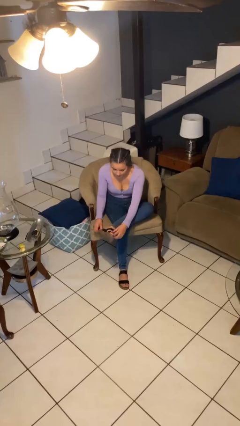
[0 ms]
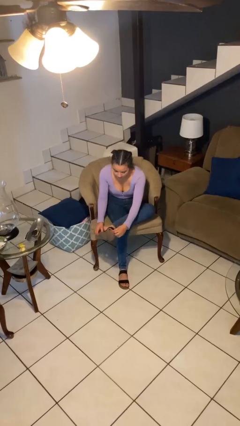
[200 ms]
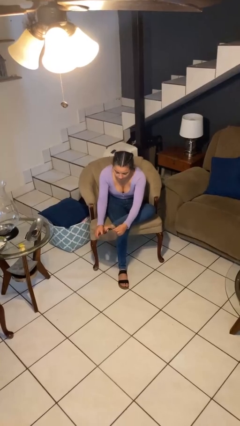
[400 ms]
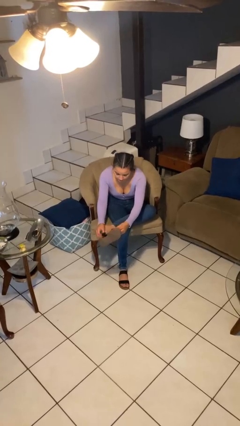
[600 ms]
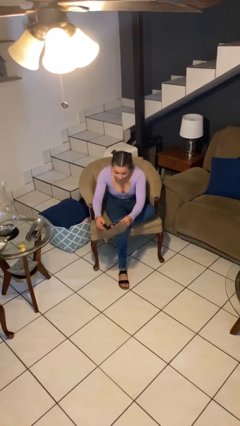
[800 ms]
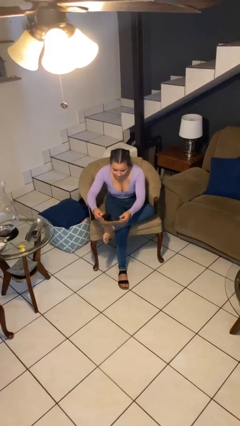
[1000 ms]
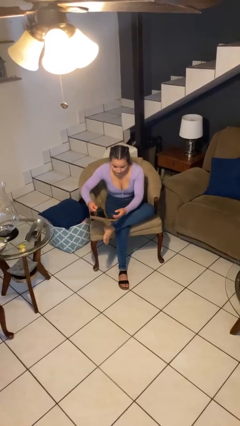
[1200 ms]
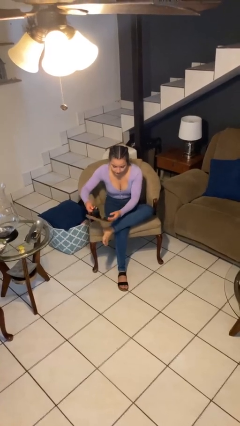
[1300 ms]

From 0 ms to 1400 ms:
person takes off shoes

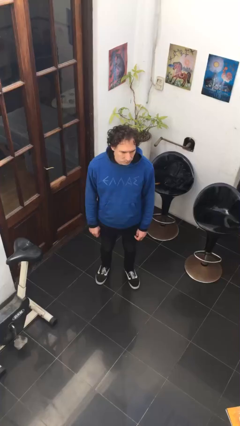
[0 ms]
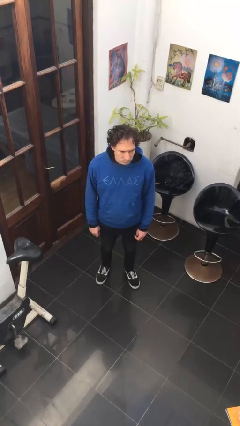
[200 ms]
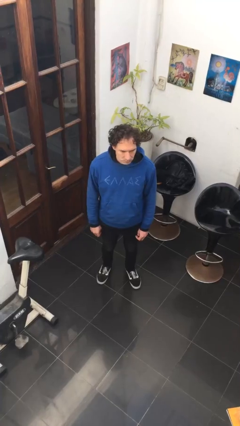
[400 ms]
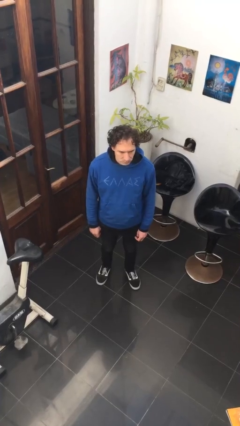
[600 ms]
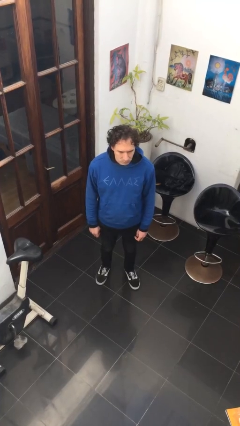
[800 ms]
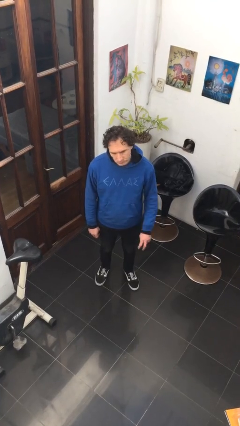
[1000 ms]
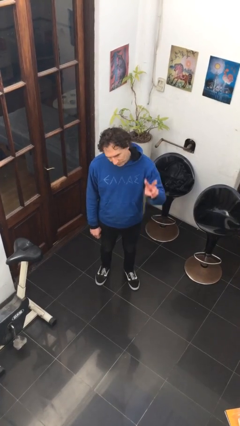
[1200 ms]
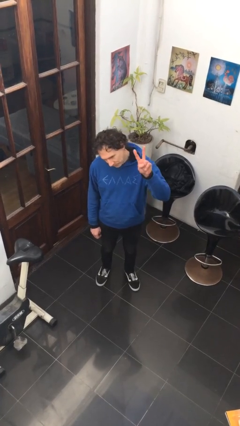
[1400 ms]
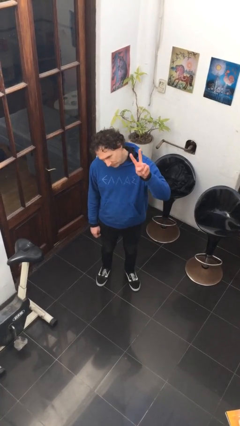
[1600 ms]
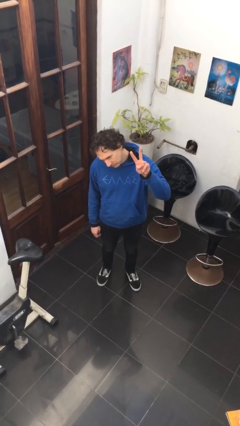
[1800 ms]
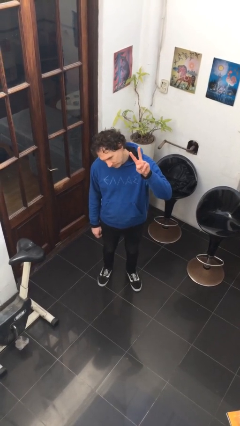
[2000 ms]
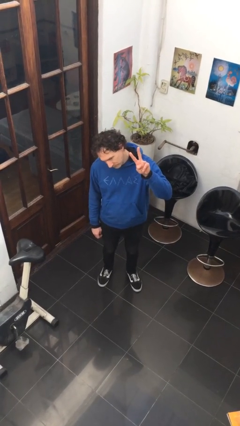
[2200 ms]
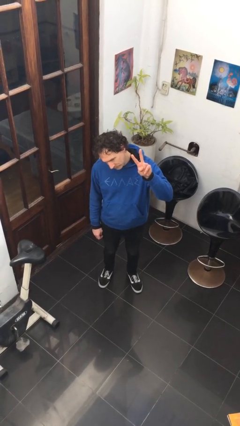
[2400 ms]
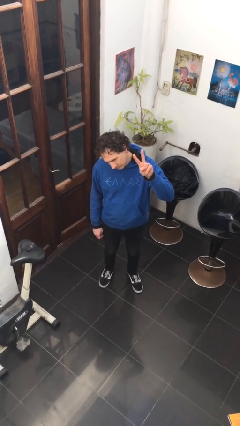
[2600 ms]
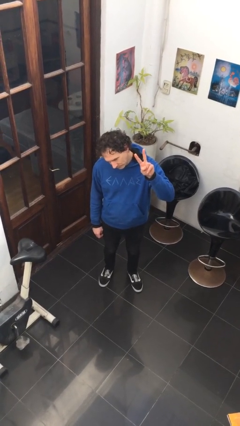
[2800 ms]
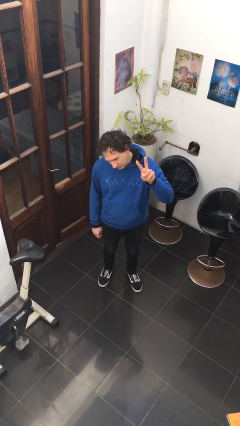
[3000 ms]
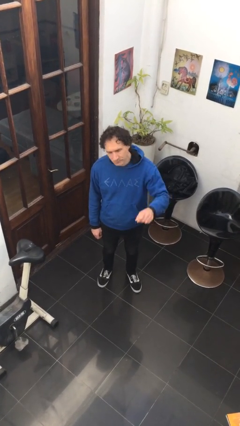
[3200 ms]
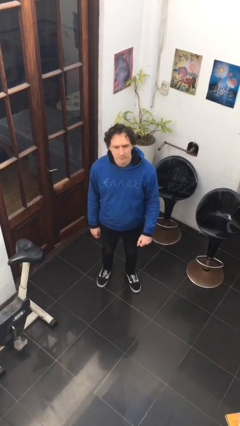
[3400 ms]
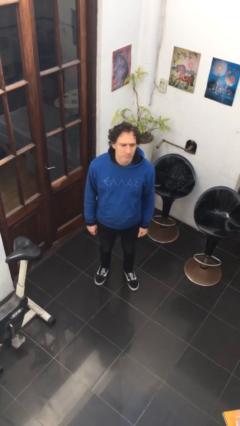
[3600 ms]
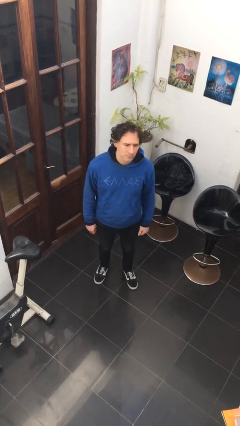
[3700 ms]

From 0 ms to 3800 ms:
person gestures peace

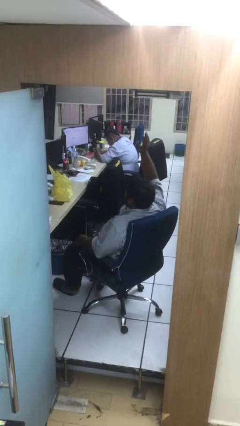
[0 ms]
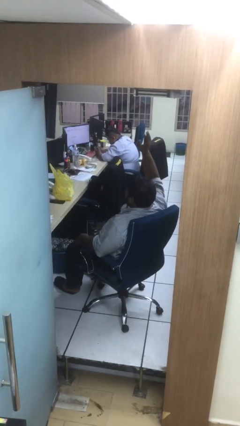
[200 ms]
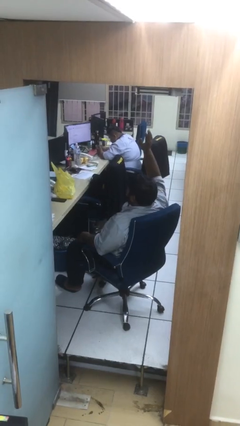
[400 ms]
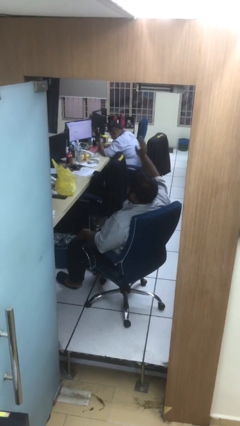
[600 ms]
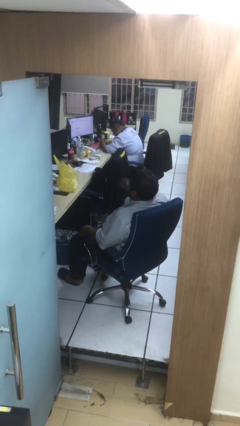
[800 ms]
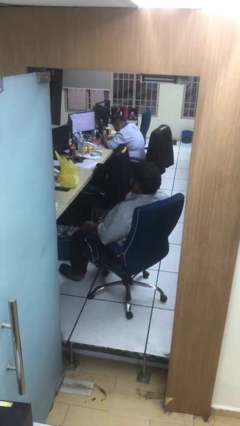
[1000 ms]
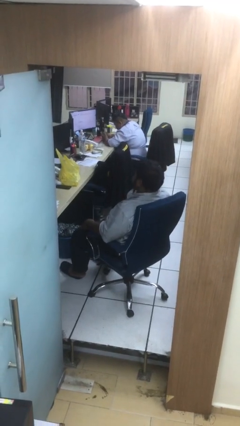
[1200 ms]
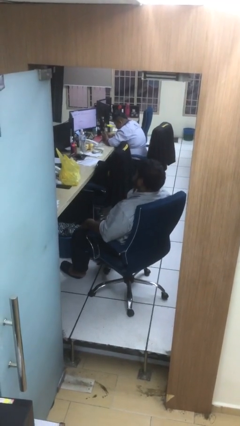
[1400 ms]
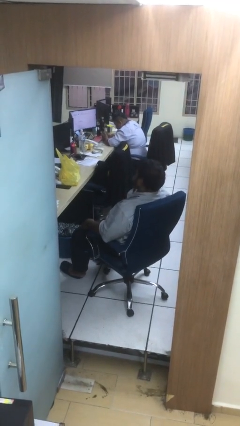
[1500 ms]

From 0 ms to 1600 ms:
person gestures lower hand

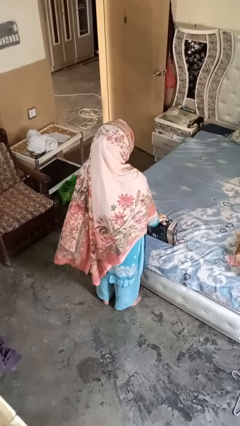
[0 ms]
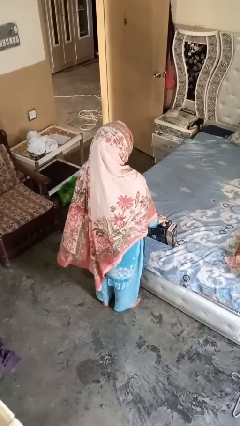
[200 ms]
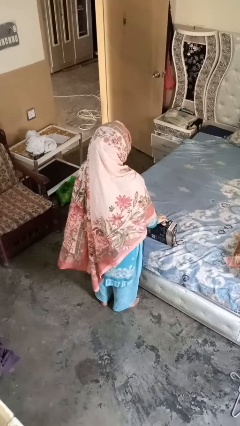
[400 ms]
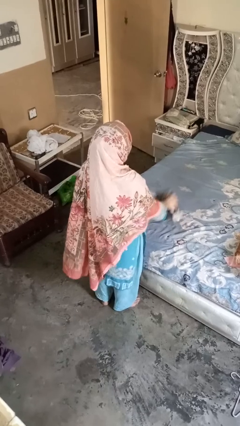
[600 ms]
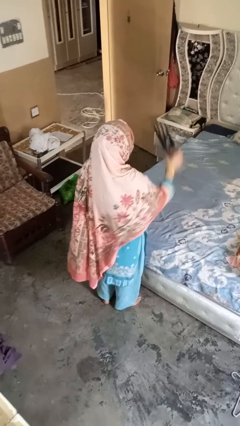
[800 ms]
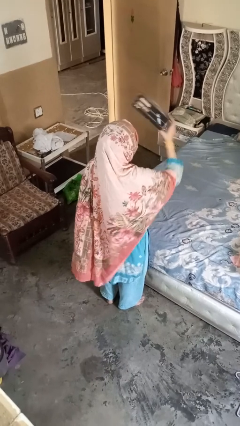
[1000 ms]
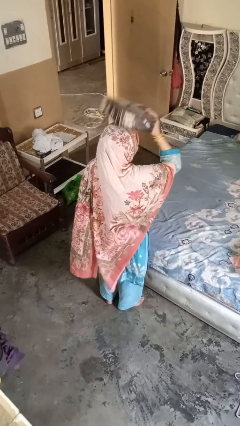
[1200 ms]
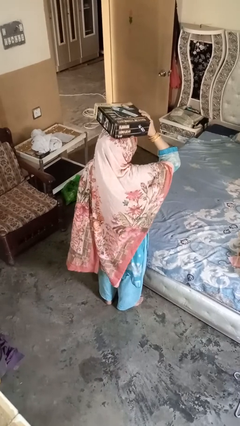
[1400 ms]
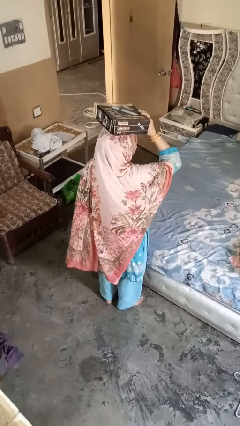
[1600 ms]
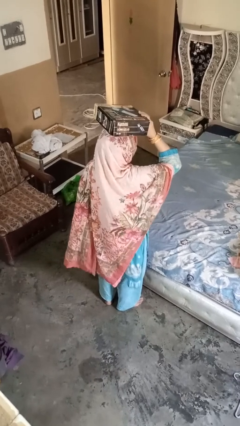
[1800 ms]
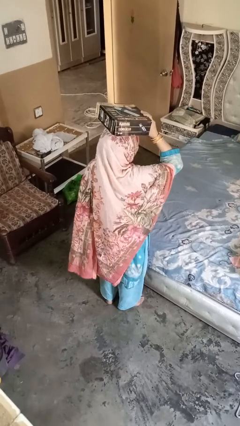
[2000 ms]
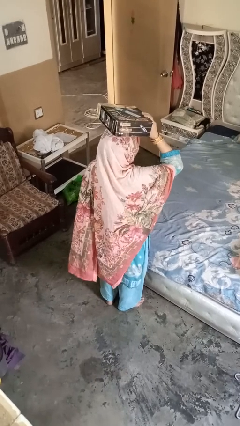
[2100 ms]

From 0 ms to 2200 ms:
person holds object above head

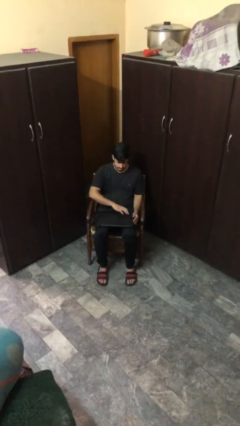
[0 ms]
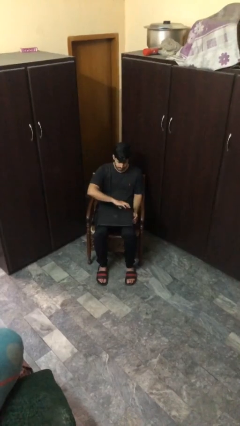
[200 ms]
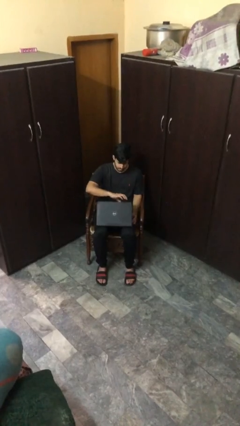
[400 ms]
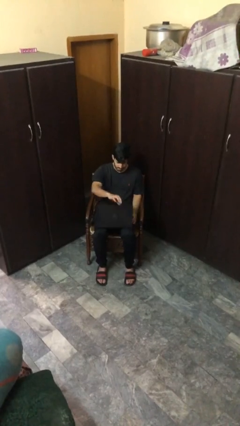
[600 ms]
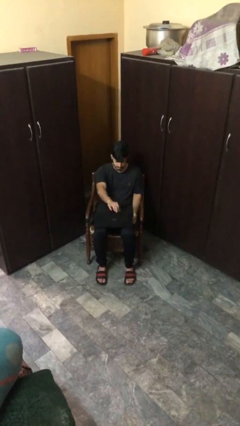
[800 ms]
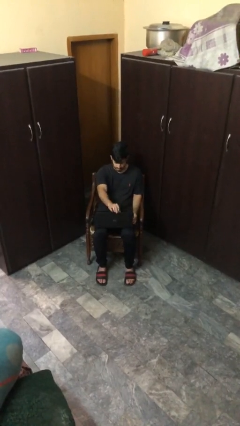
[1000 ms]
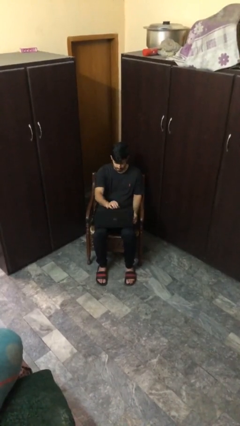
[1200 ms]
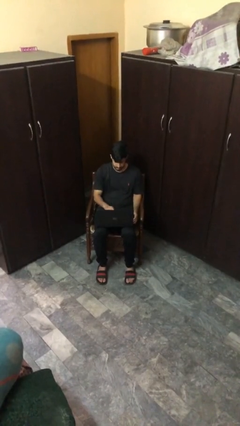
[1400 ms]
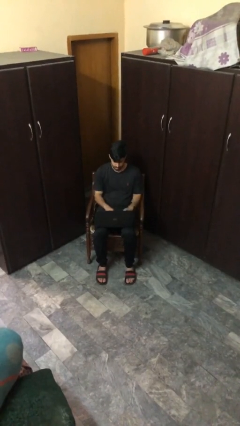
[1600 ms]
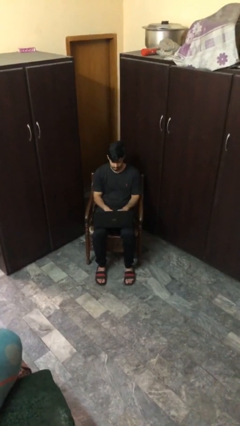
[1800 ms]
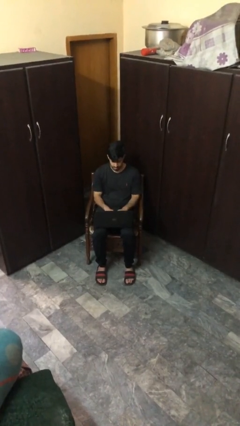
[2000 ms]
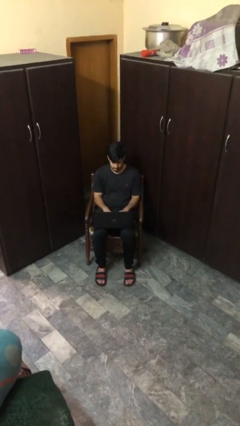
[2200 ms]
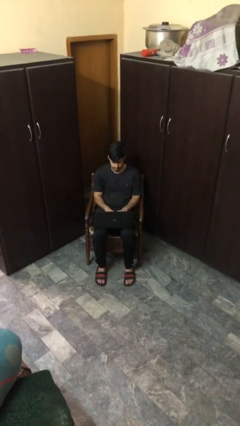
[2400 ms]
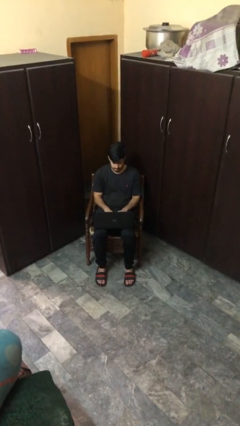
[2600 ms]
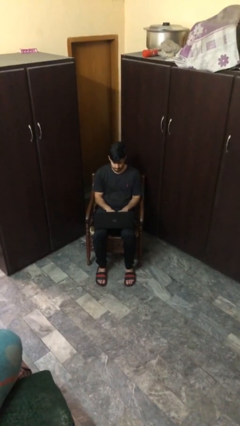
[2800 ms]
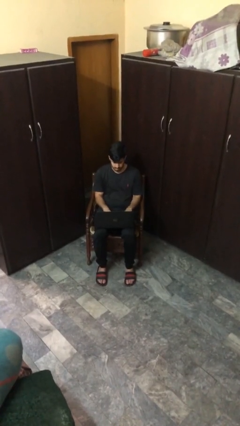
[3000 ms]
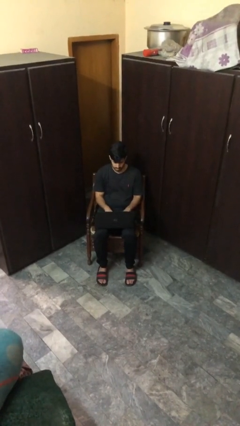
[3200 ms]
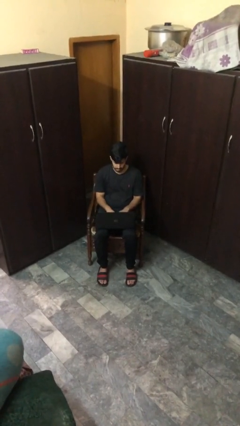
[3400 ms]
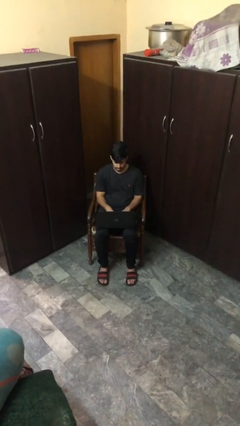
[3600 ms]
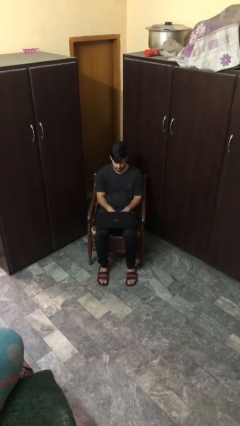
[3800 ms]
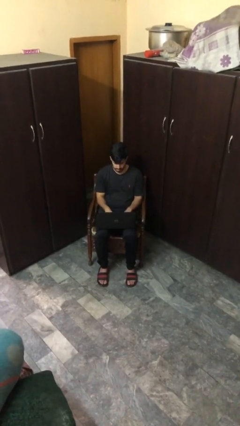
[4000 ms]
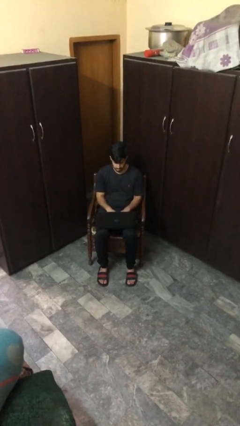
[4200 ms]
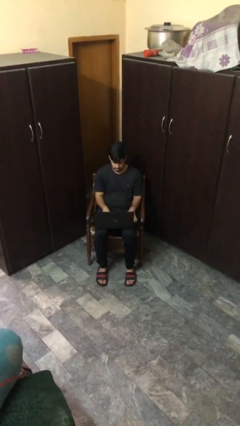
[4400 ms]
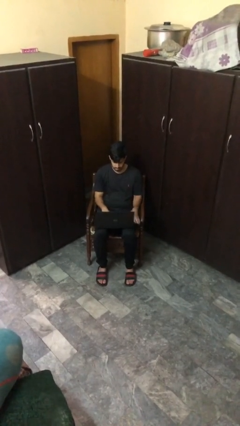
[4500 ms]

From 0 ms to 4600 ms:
person interacts with laptop

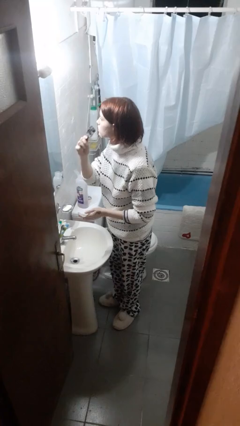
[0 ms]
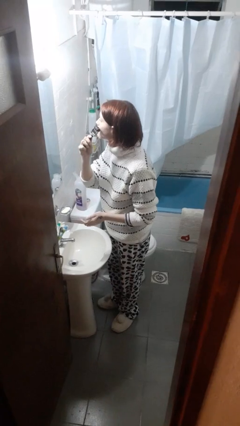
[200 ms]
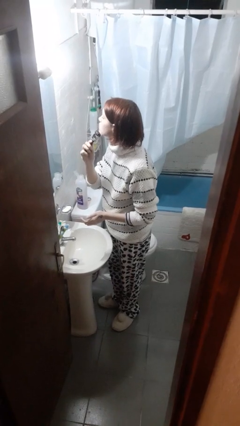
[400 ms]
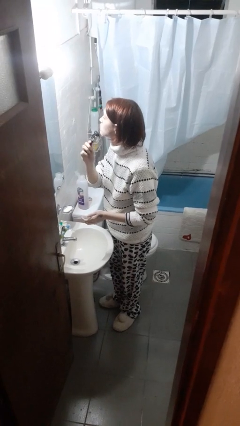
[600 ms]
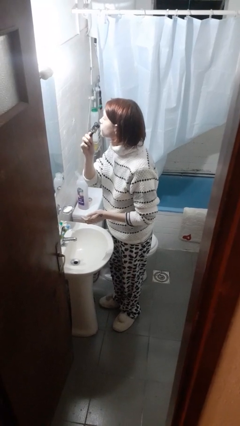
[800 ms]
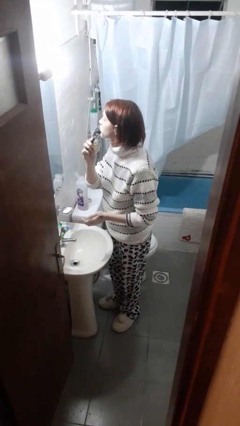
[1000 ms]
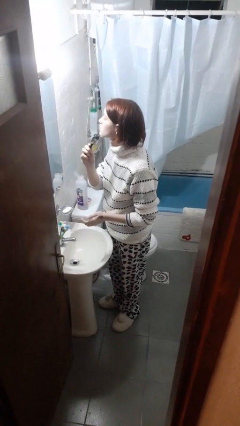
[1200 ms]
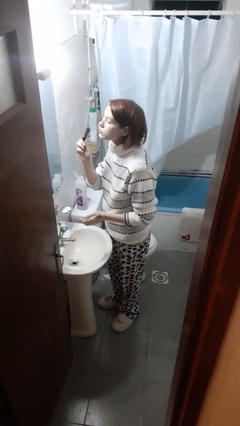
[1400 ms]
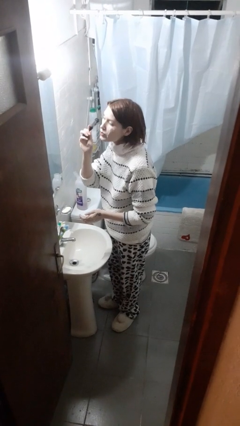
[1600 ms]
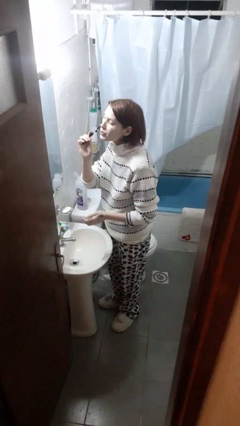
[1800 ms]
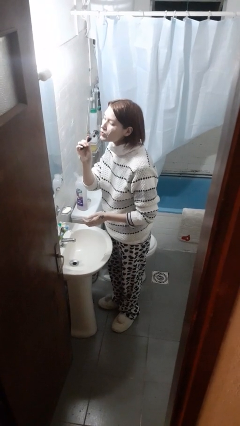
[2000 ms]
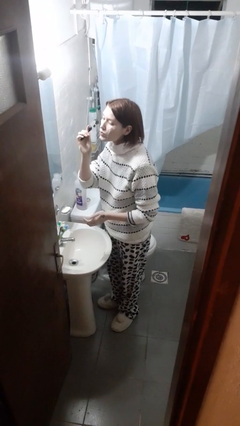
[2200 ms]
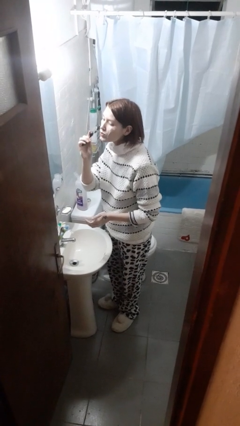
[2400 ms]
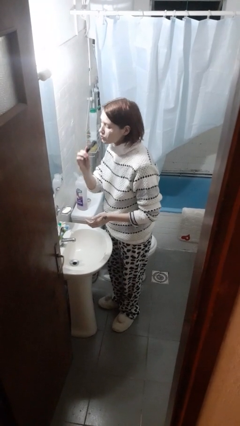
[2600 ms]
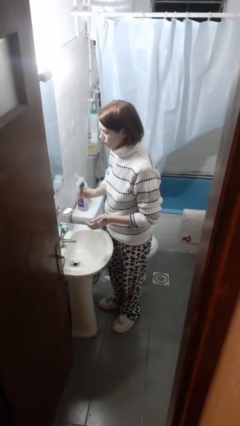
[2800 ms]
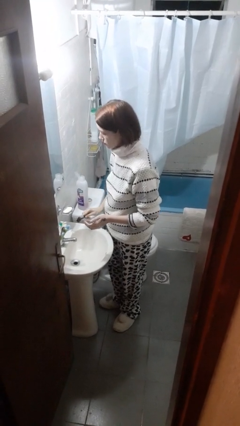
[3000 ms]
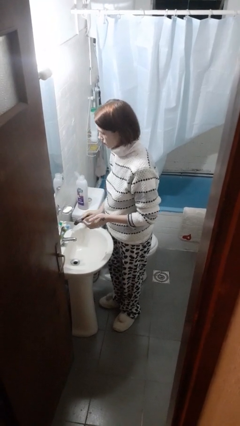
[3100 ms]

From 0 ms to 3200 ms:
person shaves face

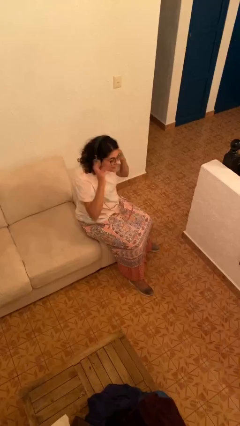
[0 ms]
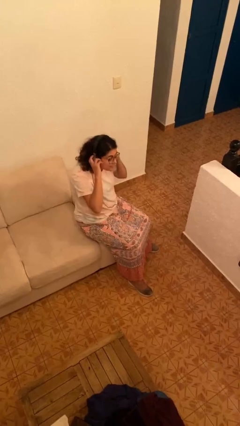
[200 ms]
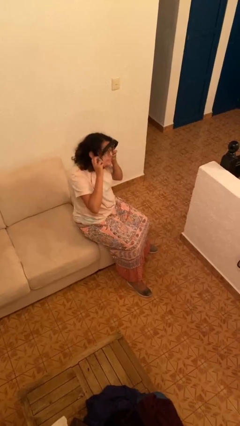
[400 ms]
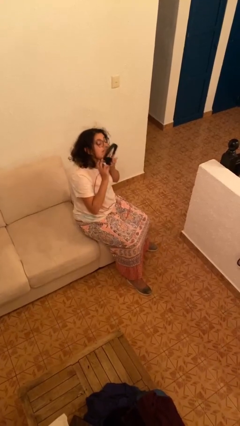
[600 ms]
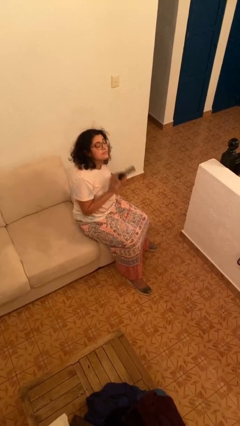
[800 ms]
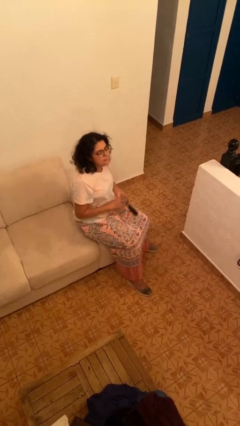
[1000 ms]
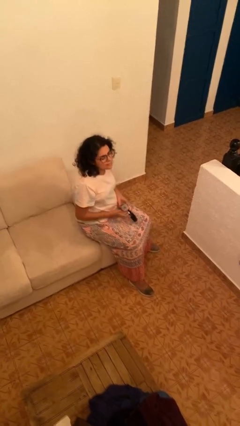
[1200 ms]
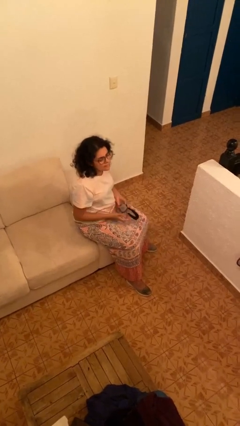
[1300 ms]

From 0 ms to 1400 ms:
person takes off headphones
